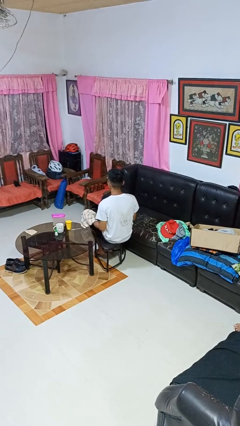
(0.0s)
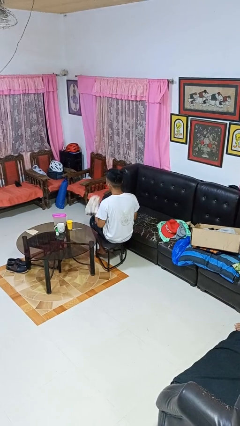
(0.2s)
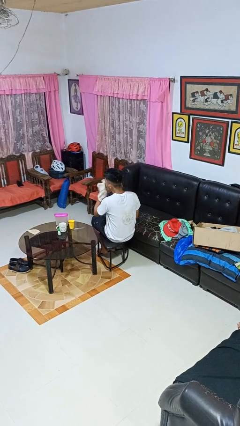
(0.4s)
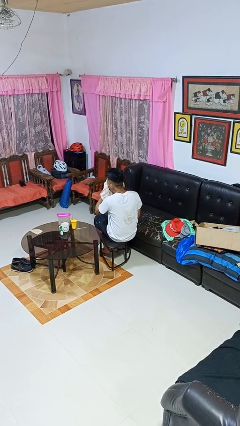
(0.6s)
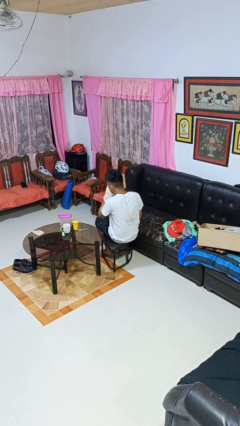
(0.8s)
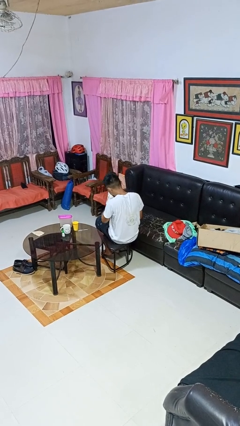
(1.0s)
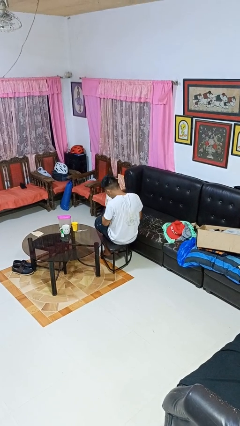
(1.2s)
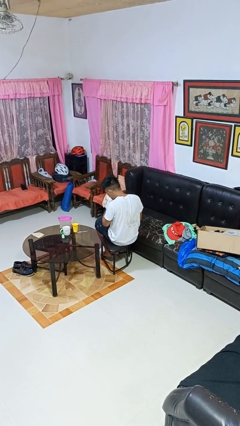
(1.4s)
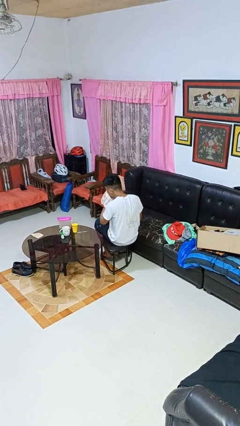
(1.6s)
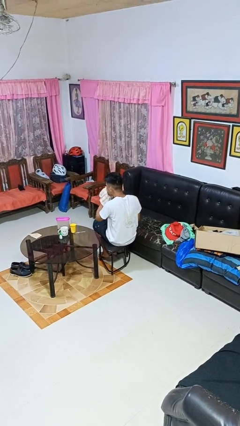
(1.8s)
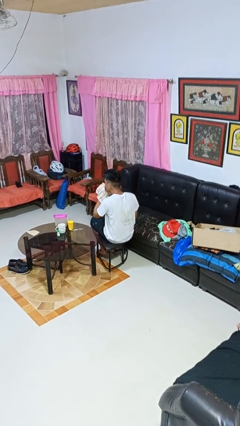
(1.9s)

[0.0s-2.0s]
person blows nose

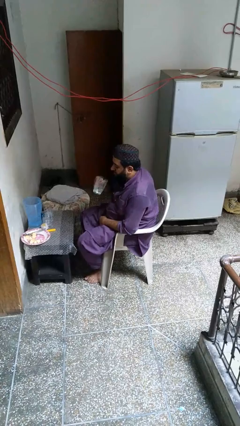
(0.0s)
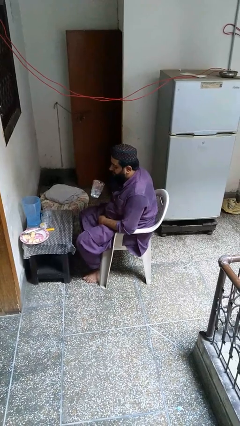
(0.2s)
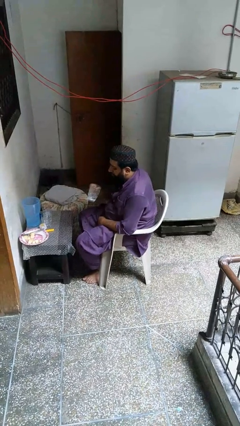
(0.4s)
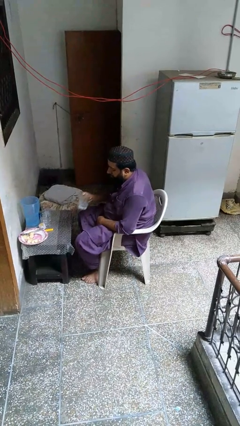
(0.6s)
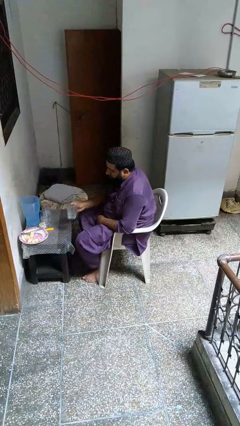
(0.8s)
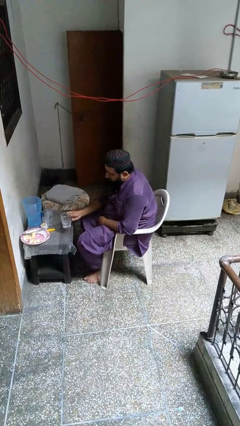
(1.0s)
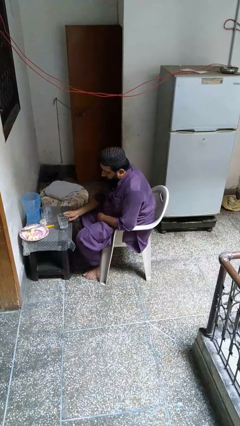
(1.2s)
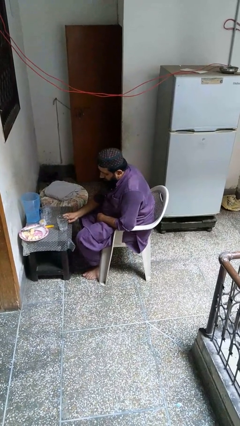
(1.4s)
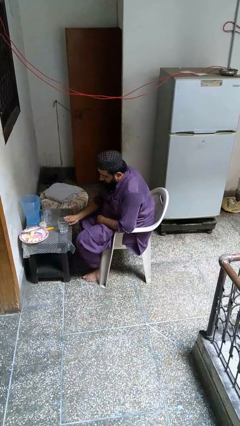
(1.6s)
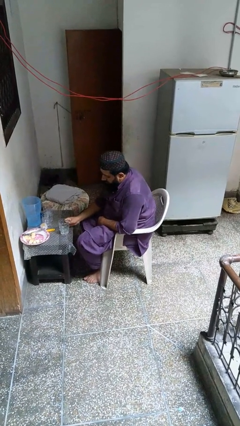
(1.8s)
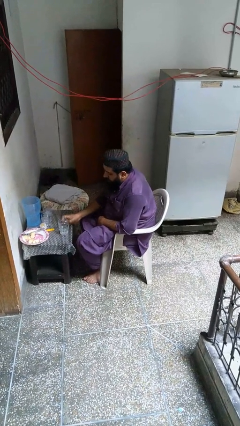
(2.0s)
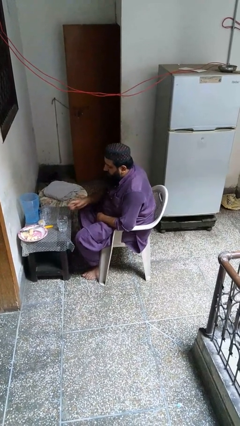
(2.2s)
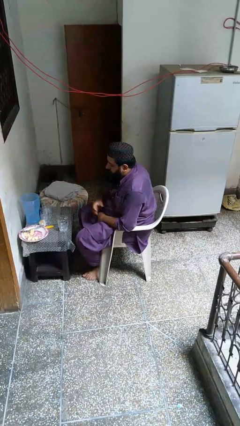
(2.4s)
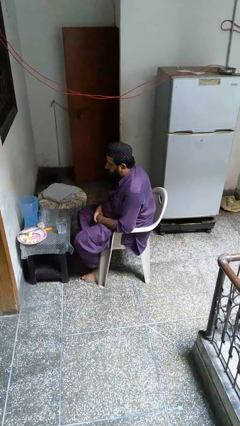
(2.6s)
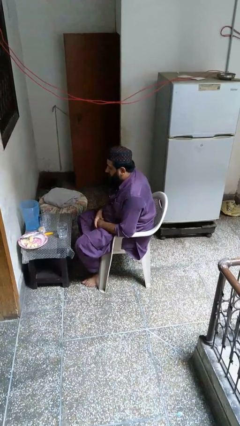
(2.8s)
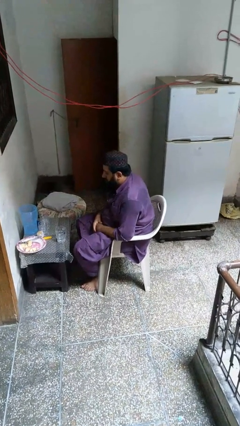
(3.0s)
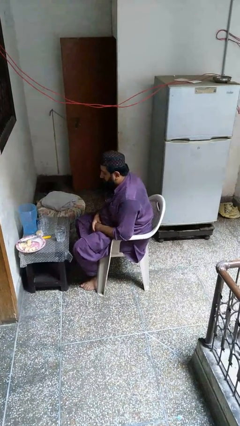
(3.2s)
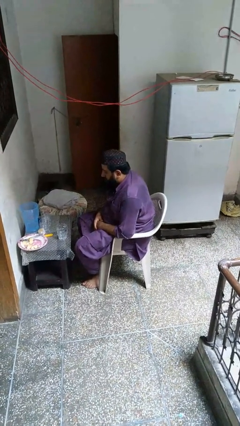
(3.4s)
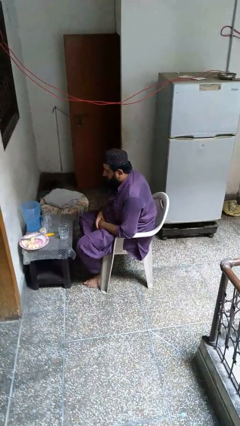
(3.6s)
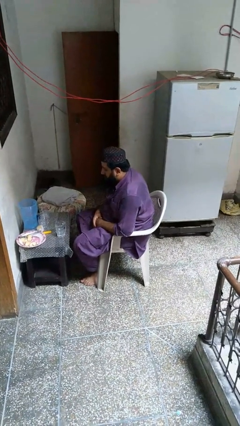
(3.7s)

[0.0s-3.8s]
person puts down object on table

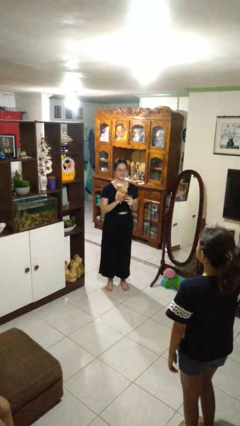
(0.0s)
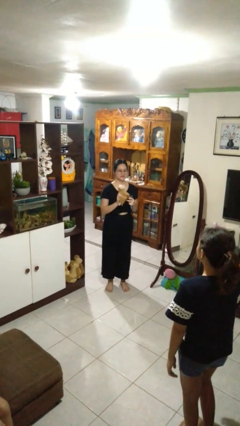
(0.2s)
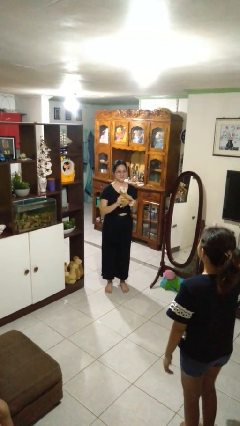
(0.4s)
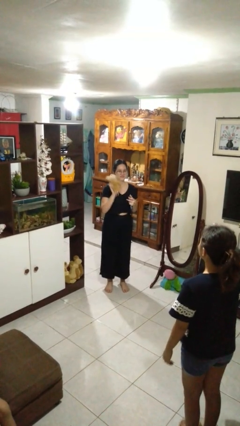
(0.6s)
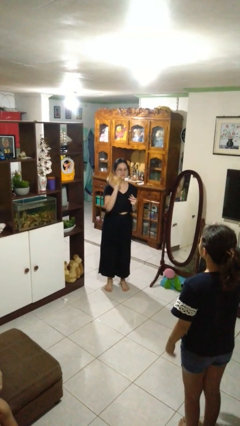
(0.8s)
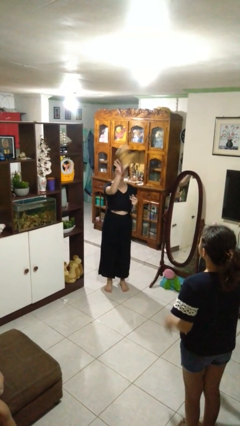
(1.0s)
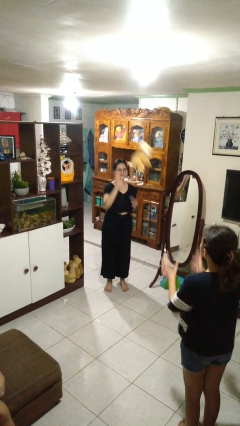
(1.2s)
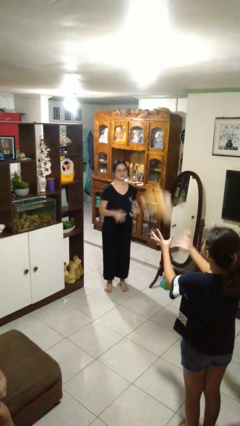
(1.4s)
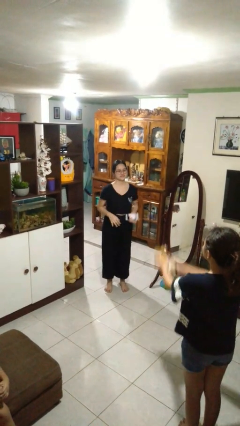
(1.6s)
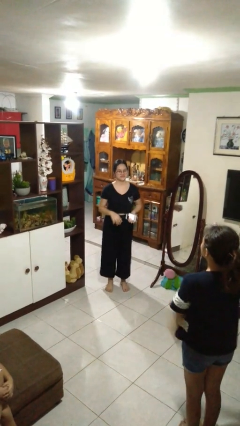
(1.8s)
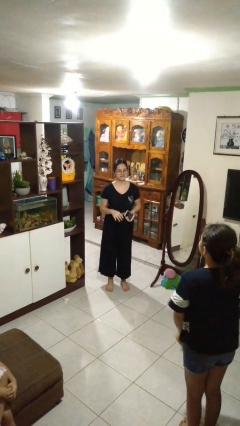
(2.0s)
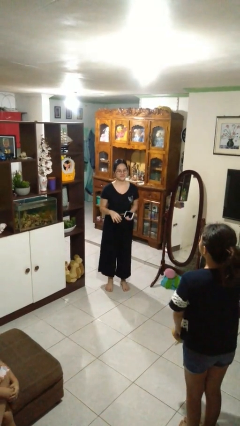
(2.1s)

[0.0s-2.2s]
person throws object to person

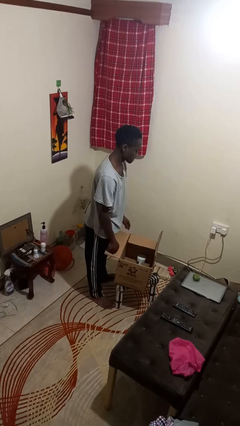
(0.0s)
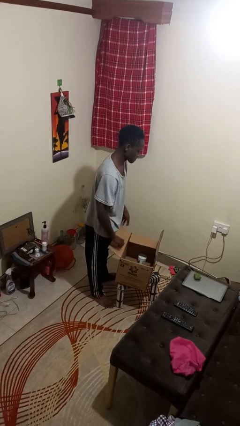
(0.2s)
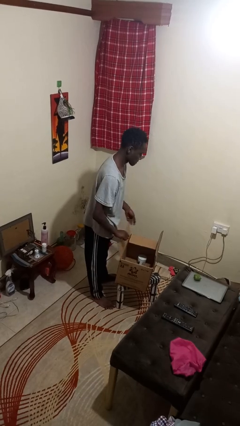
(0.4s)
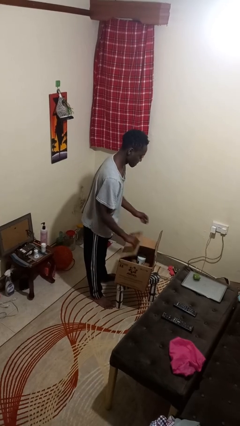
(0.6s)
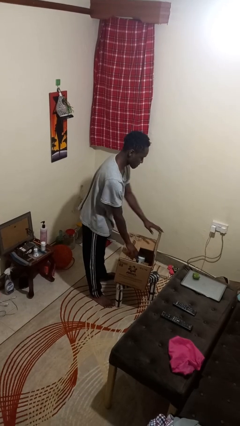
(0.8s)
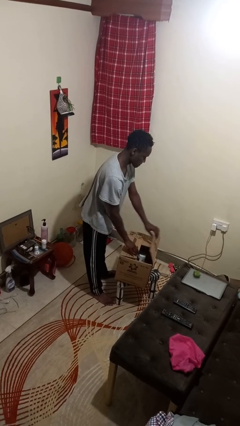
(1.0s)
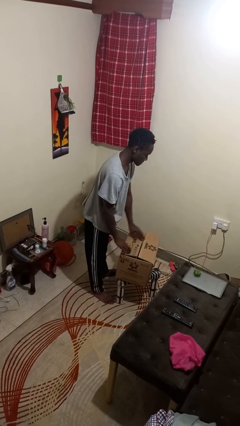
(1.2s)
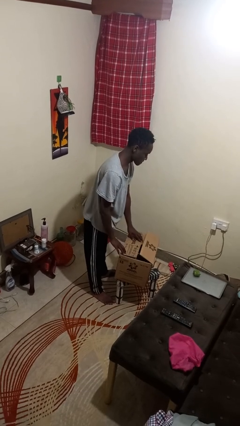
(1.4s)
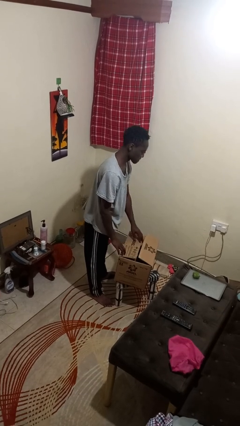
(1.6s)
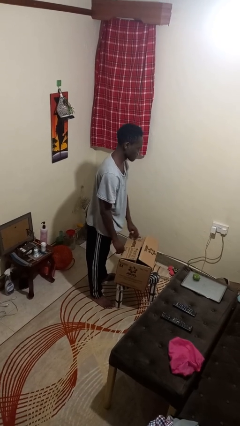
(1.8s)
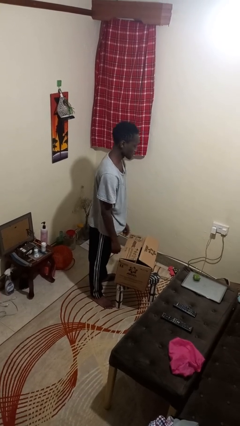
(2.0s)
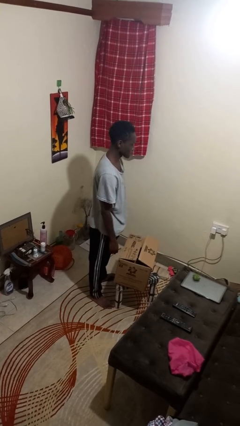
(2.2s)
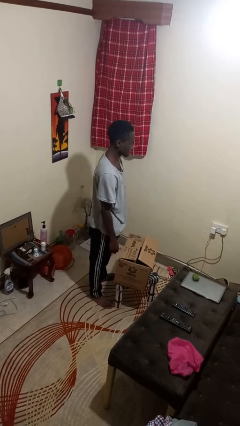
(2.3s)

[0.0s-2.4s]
person closes box

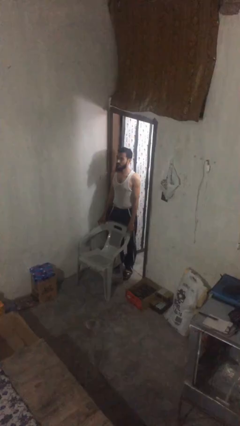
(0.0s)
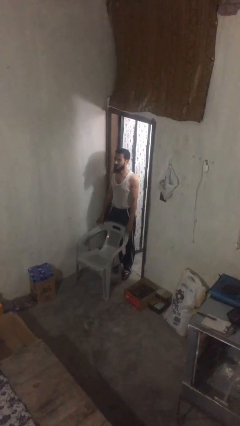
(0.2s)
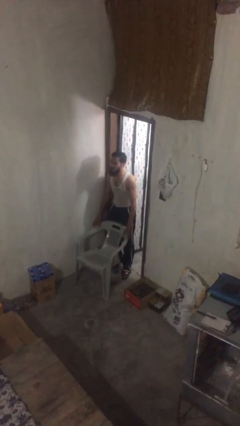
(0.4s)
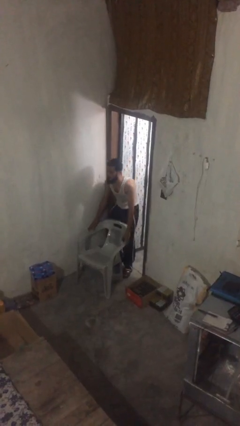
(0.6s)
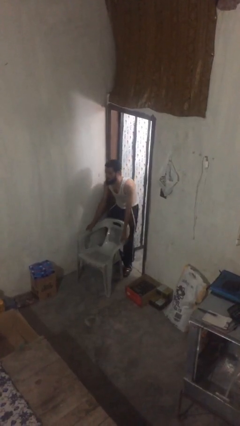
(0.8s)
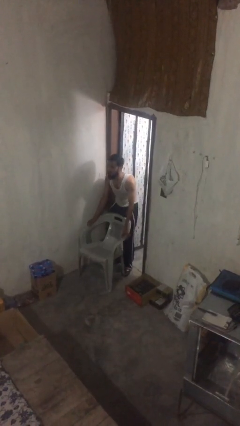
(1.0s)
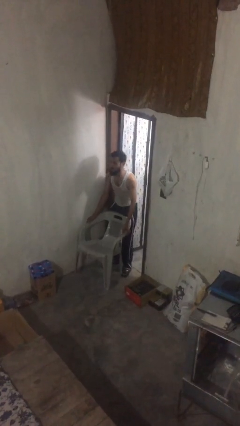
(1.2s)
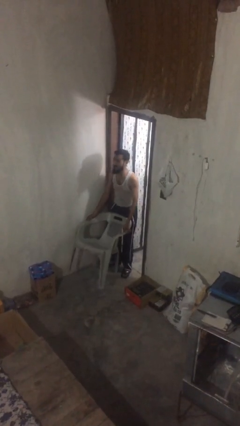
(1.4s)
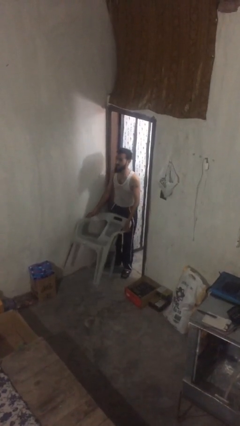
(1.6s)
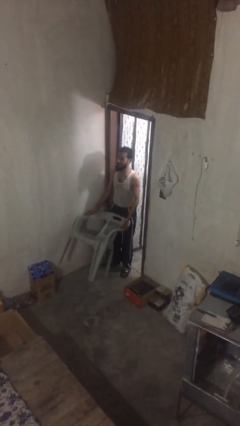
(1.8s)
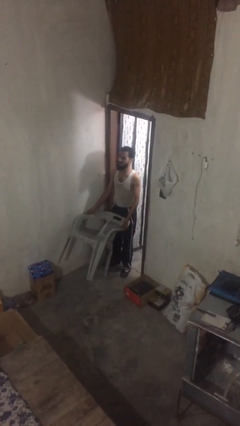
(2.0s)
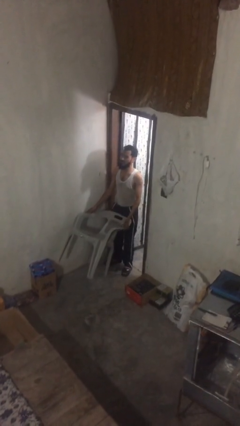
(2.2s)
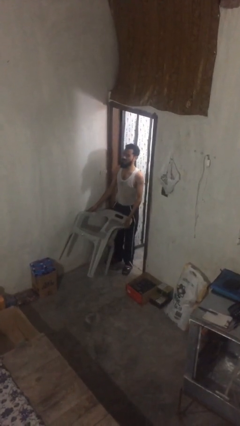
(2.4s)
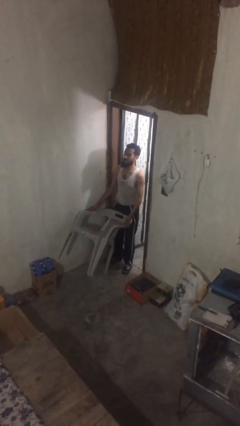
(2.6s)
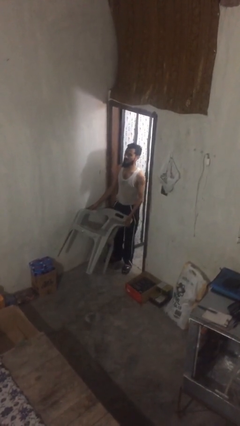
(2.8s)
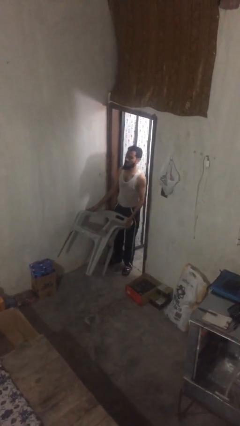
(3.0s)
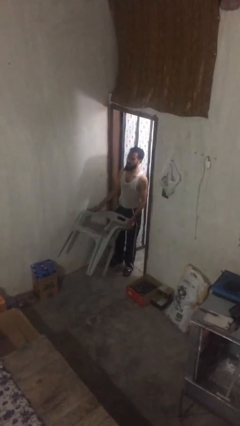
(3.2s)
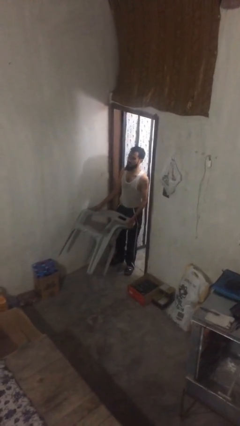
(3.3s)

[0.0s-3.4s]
person picks up object from floor

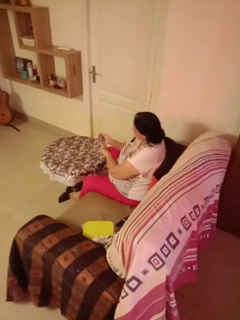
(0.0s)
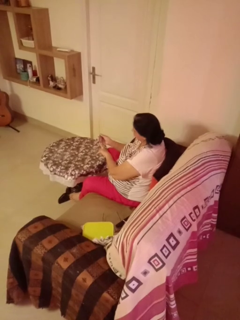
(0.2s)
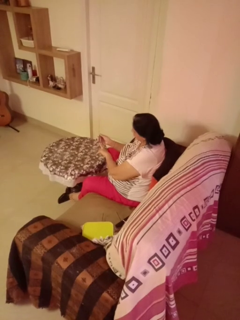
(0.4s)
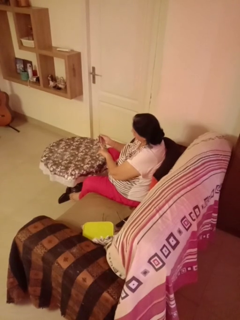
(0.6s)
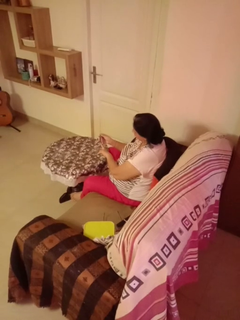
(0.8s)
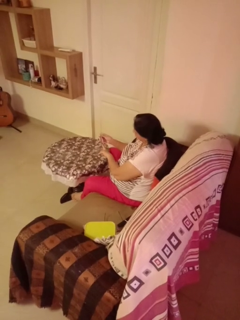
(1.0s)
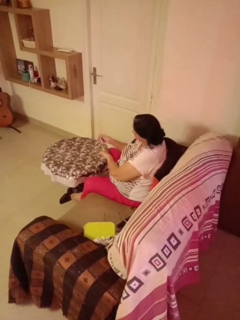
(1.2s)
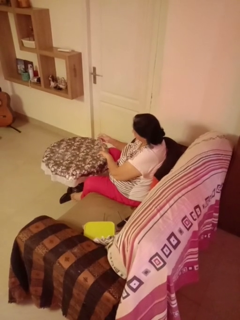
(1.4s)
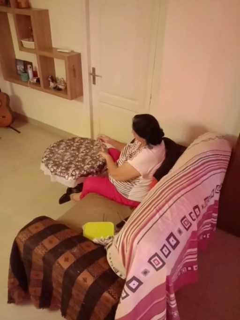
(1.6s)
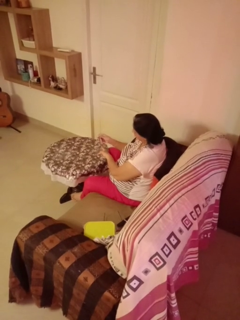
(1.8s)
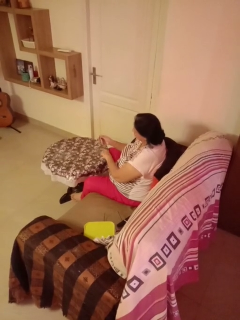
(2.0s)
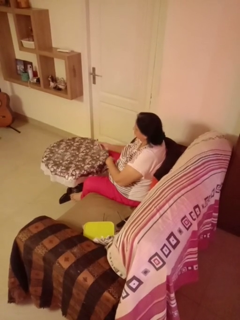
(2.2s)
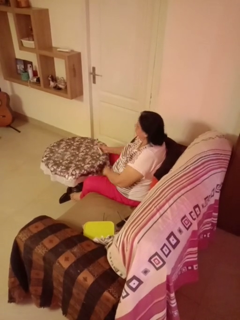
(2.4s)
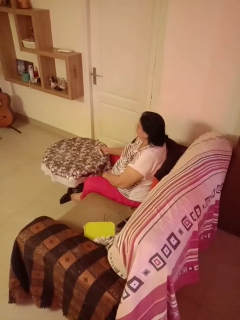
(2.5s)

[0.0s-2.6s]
person clips fingernails

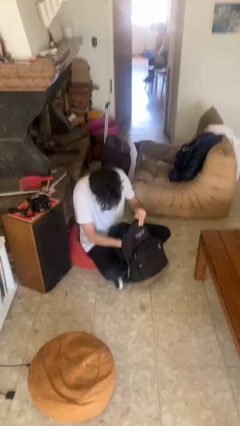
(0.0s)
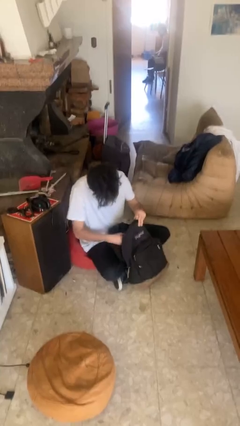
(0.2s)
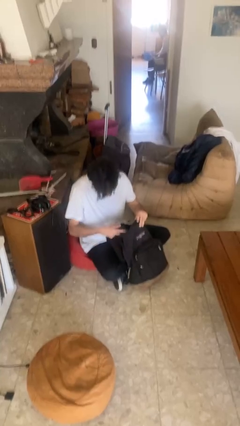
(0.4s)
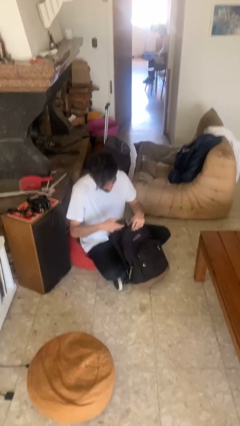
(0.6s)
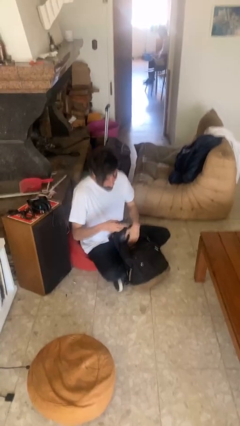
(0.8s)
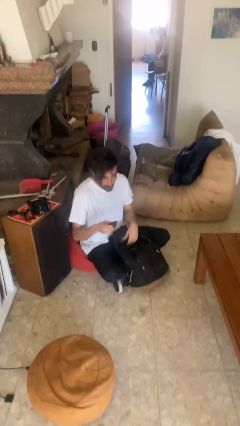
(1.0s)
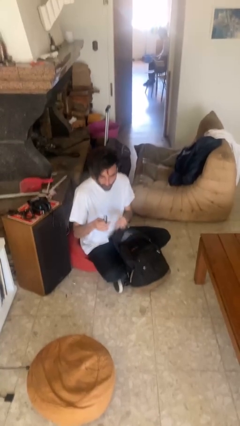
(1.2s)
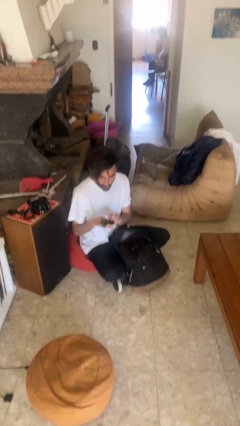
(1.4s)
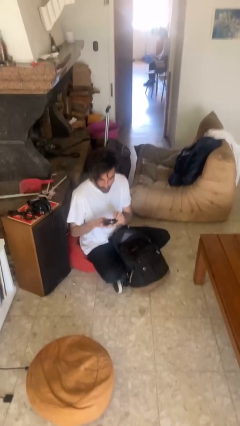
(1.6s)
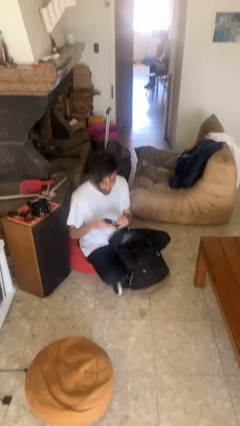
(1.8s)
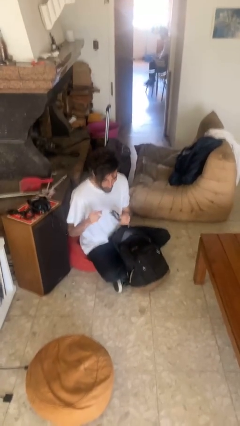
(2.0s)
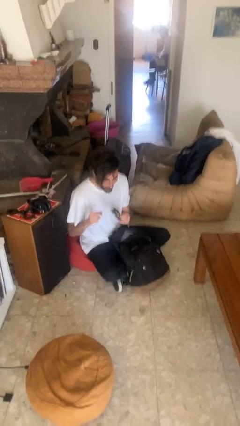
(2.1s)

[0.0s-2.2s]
person takes object from backpack
